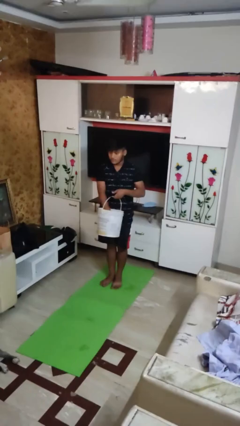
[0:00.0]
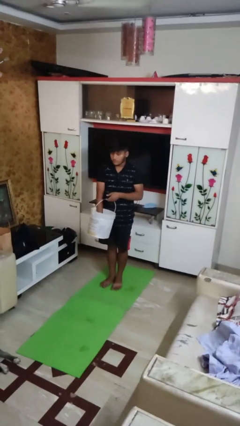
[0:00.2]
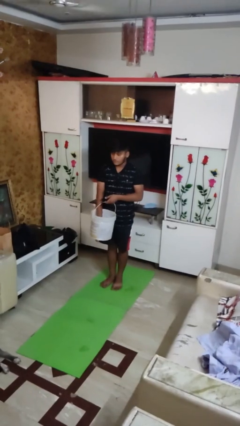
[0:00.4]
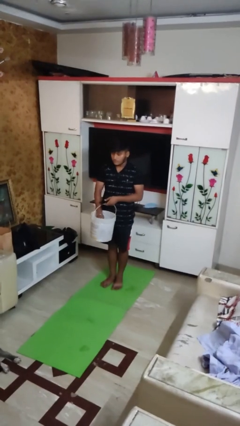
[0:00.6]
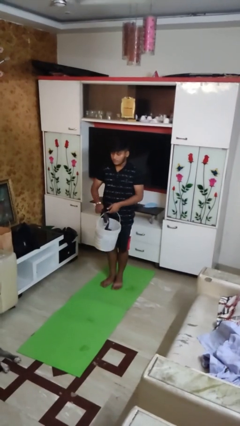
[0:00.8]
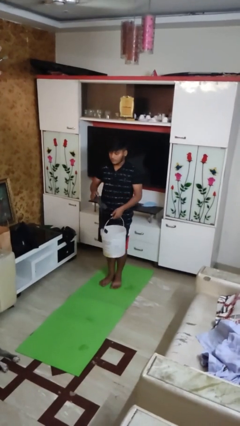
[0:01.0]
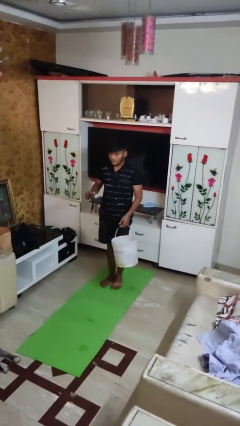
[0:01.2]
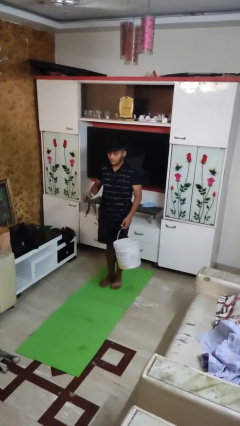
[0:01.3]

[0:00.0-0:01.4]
person takes object from basket

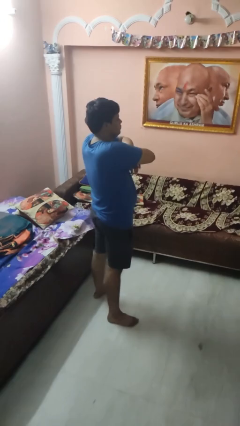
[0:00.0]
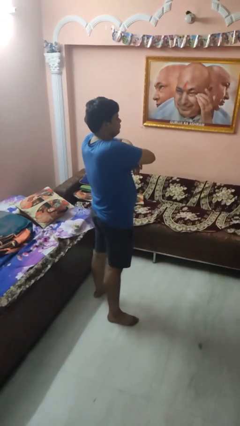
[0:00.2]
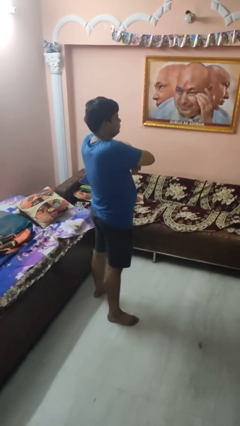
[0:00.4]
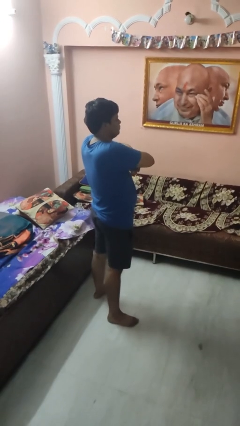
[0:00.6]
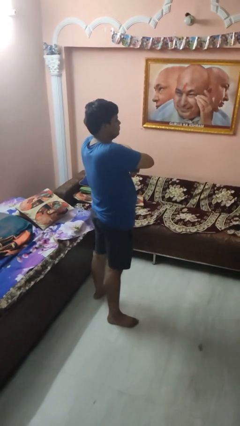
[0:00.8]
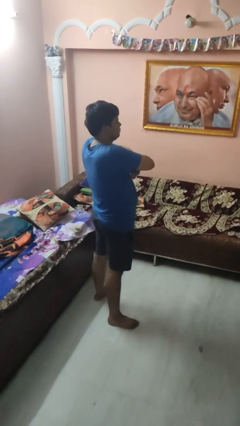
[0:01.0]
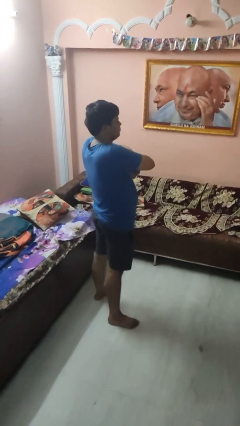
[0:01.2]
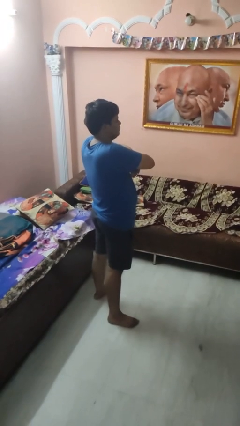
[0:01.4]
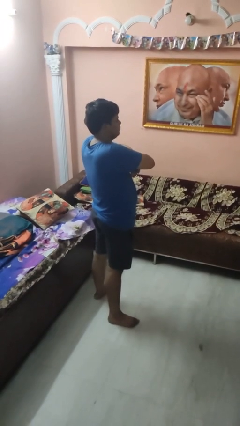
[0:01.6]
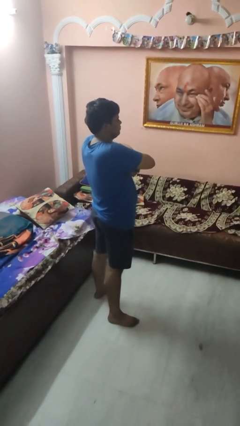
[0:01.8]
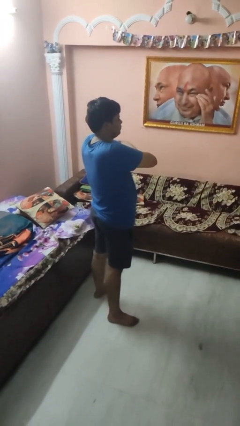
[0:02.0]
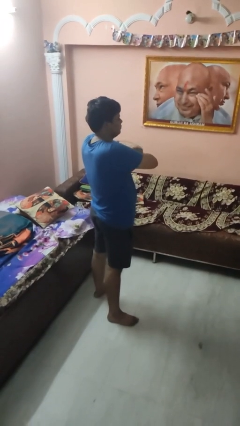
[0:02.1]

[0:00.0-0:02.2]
person crosses arms

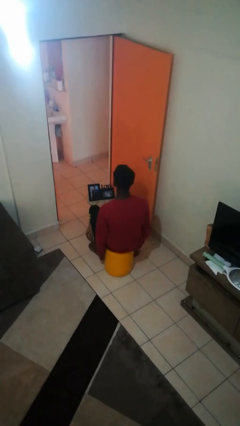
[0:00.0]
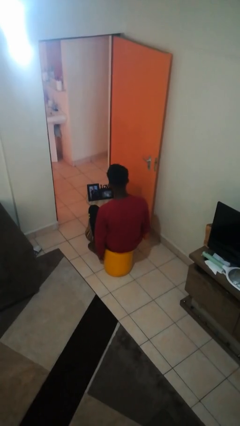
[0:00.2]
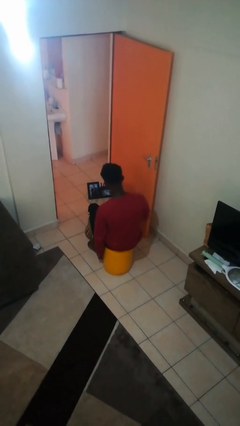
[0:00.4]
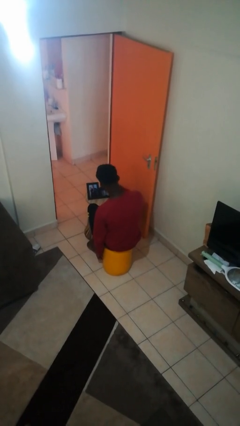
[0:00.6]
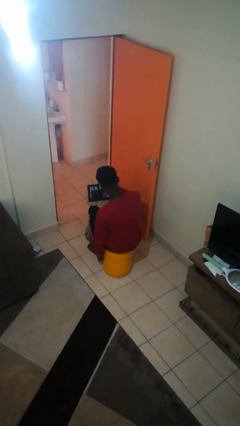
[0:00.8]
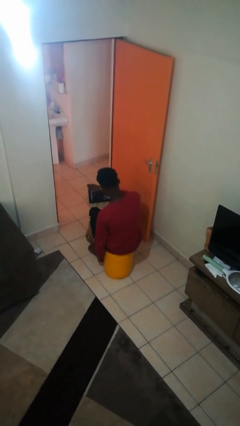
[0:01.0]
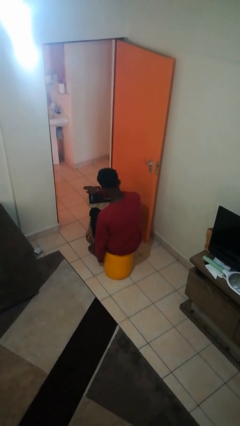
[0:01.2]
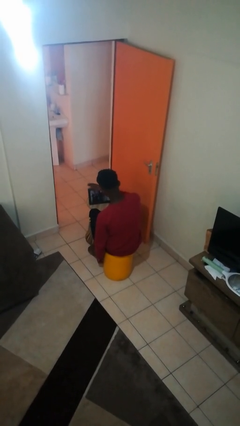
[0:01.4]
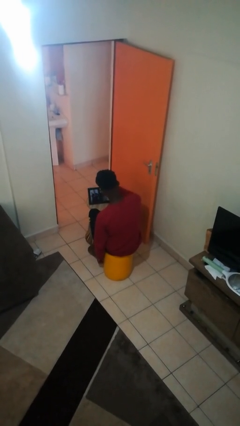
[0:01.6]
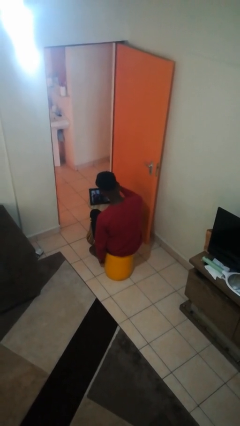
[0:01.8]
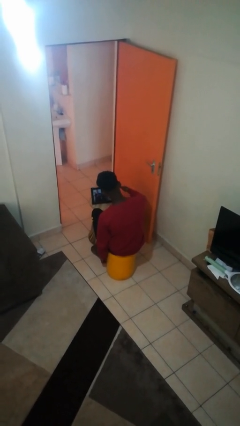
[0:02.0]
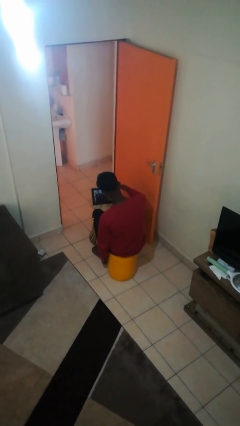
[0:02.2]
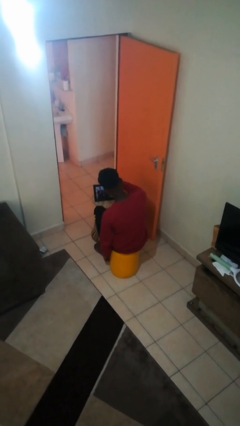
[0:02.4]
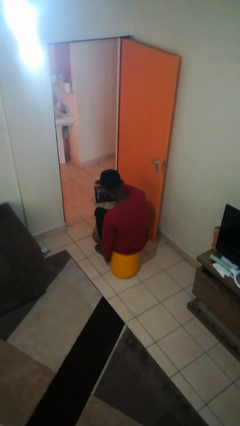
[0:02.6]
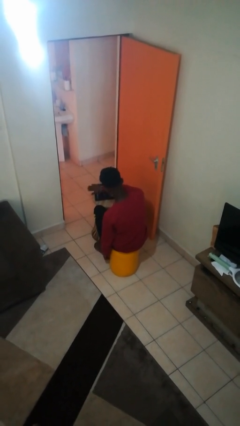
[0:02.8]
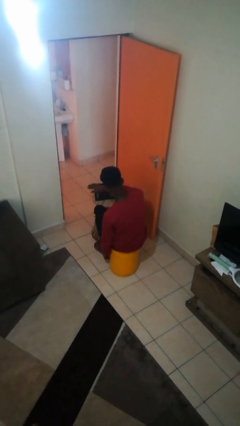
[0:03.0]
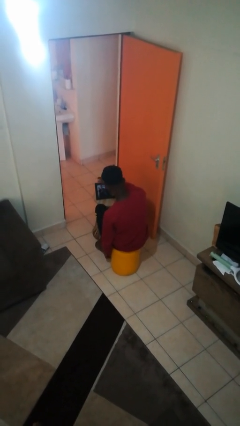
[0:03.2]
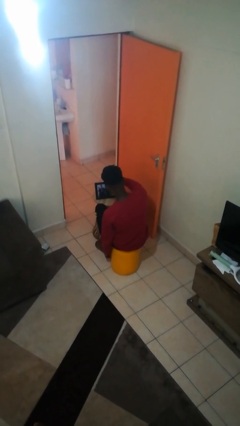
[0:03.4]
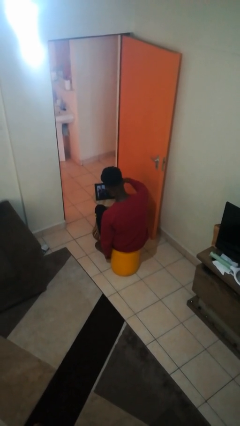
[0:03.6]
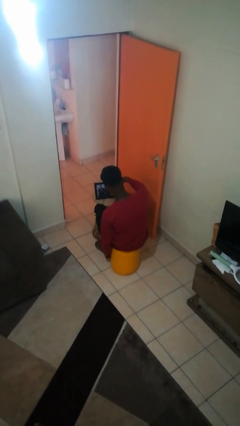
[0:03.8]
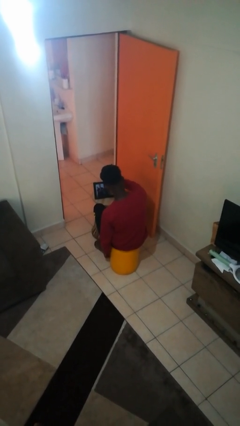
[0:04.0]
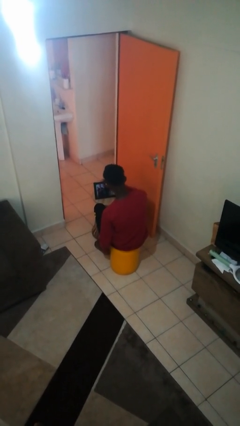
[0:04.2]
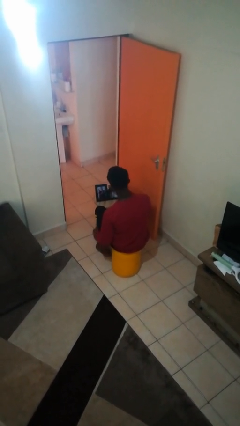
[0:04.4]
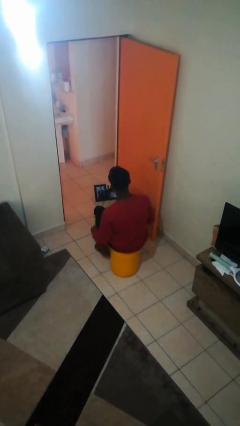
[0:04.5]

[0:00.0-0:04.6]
person waves hand over object

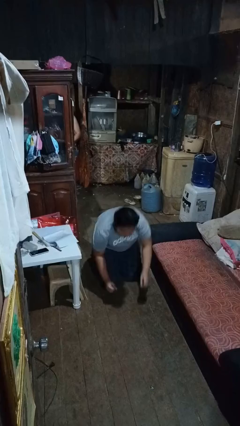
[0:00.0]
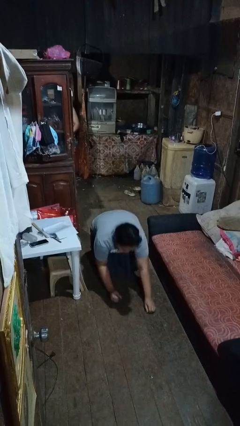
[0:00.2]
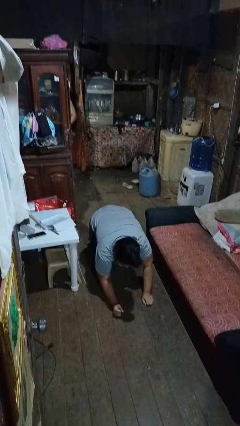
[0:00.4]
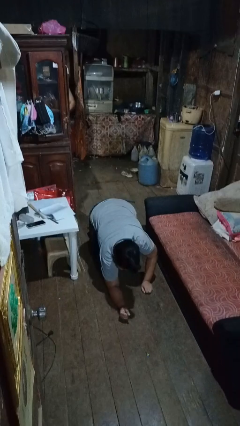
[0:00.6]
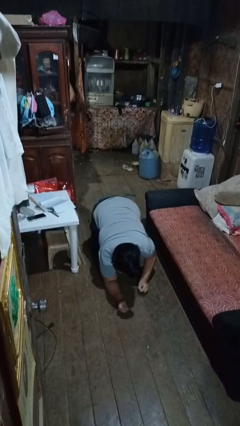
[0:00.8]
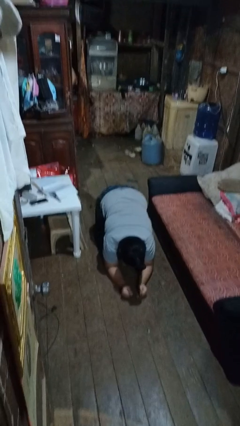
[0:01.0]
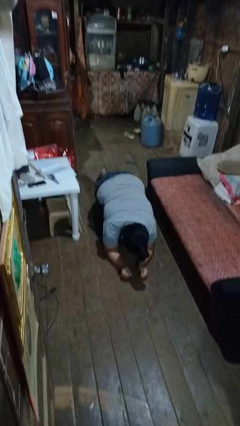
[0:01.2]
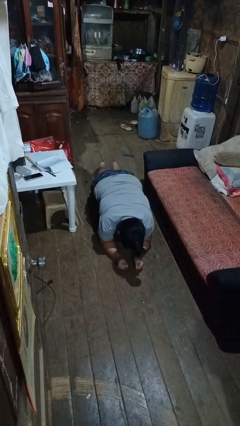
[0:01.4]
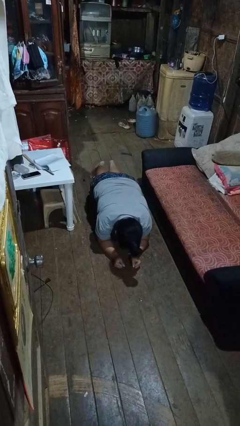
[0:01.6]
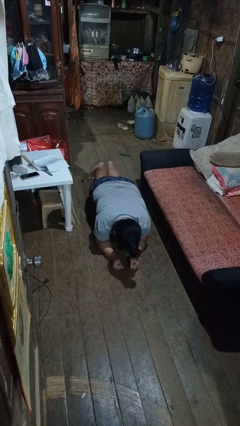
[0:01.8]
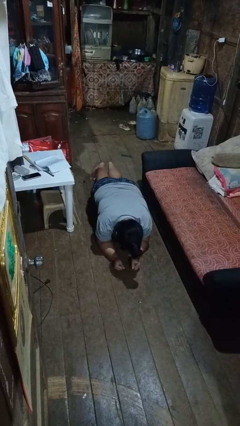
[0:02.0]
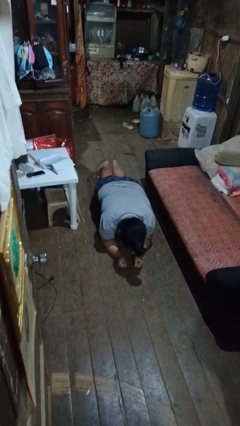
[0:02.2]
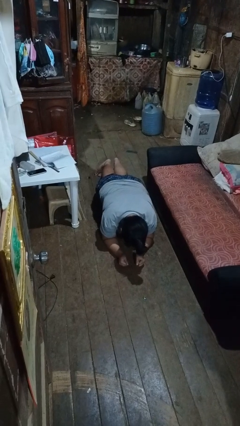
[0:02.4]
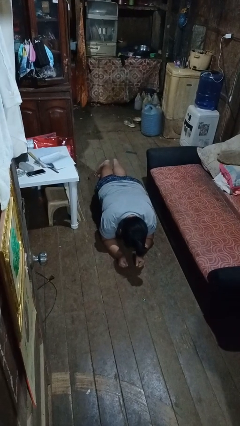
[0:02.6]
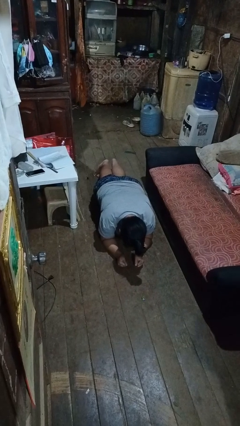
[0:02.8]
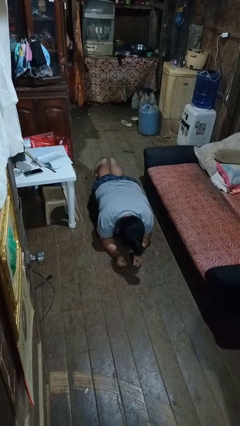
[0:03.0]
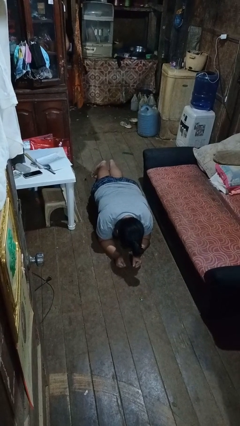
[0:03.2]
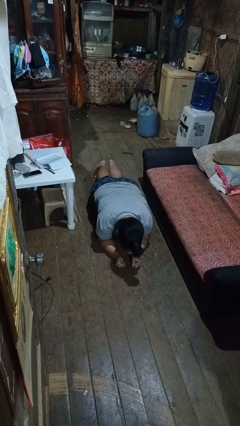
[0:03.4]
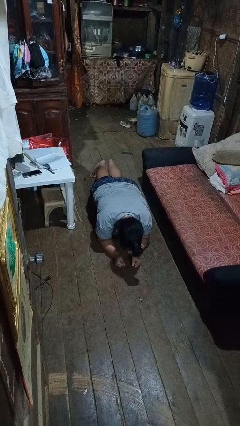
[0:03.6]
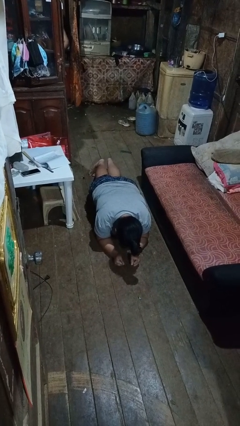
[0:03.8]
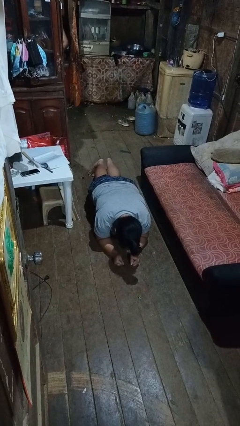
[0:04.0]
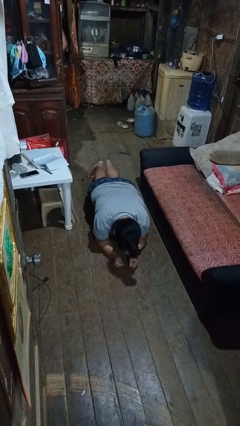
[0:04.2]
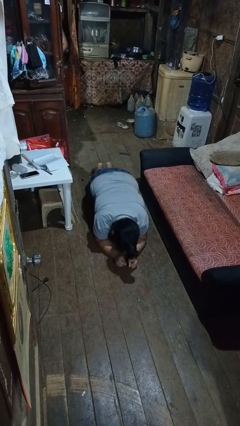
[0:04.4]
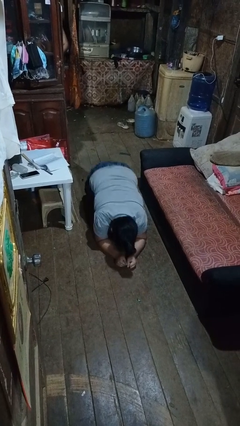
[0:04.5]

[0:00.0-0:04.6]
person exercises with plank

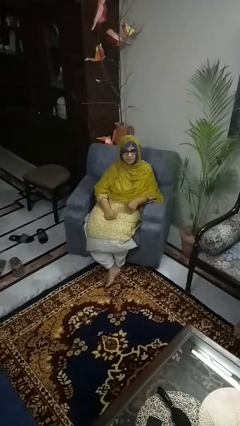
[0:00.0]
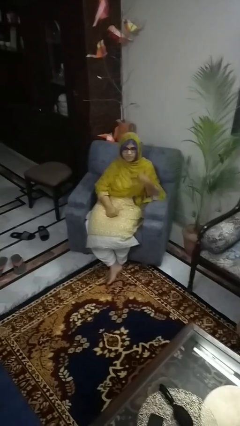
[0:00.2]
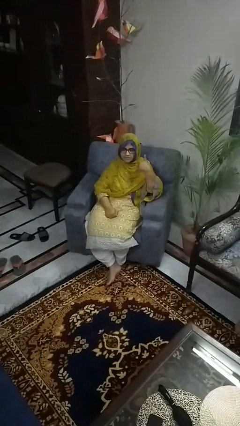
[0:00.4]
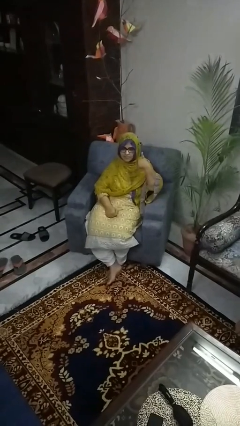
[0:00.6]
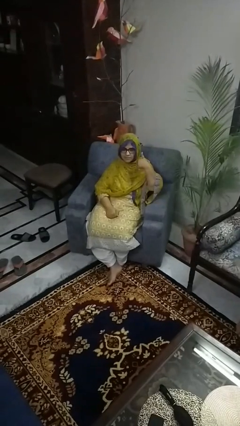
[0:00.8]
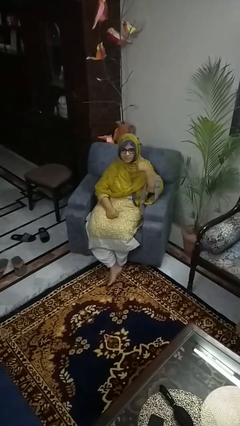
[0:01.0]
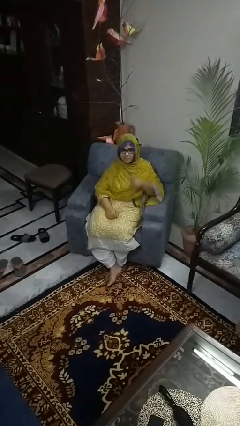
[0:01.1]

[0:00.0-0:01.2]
person gestures call me

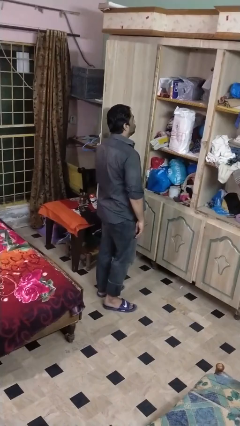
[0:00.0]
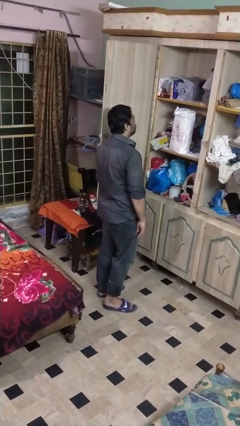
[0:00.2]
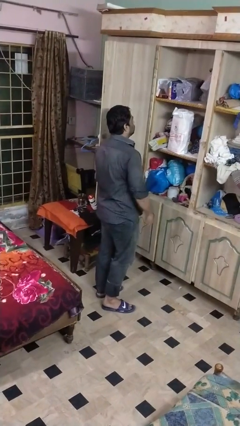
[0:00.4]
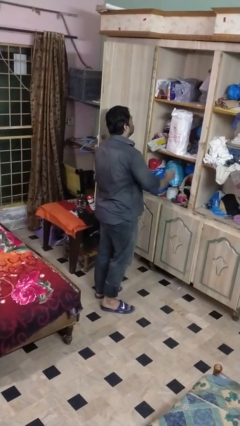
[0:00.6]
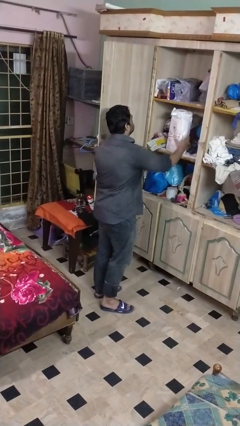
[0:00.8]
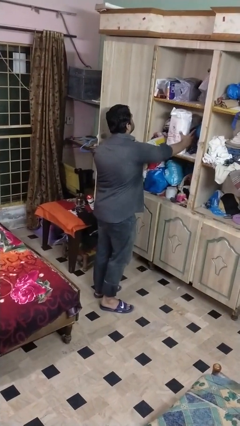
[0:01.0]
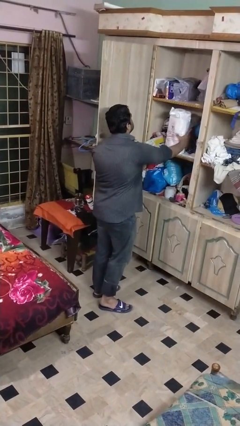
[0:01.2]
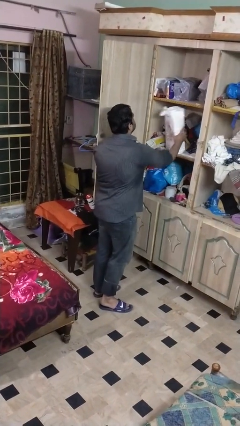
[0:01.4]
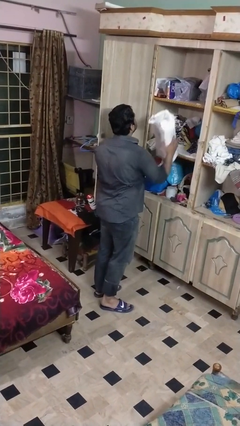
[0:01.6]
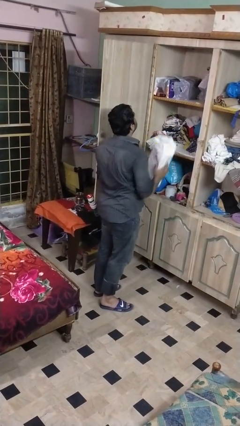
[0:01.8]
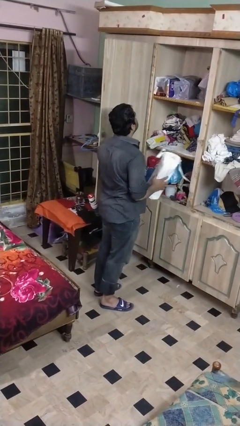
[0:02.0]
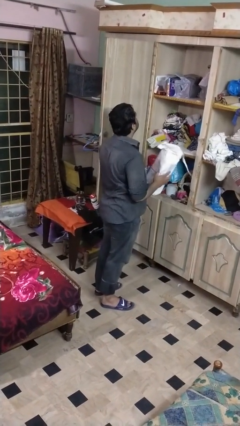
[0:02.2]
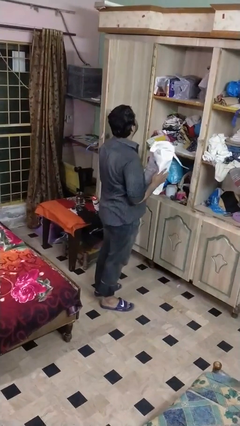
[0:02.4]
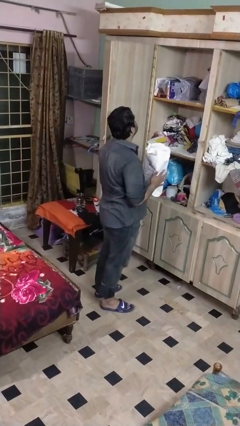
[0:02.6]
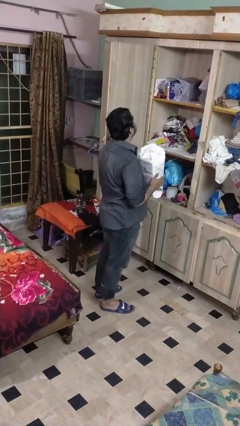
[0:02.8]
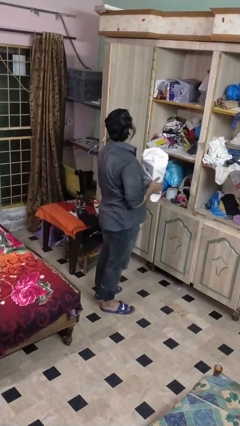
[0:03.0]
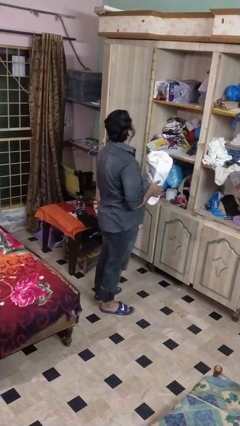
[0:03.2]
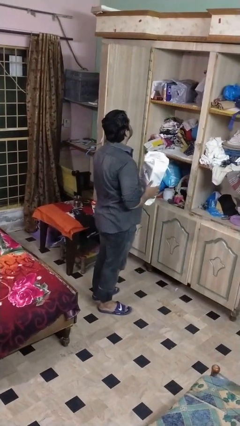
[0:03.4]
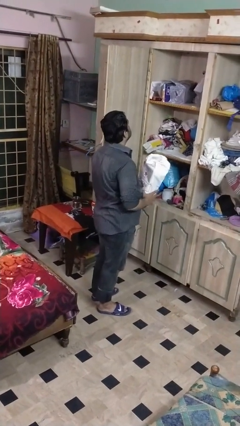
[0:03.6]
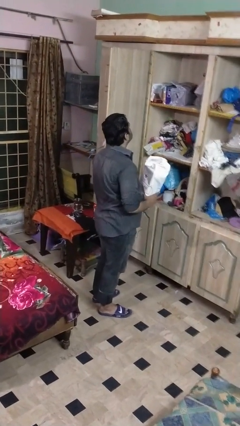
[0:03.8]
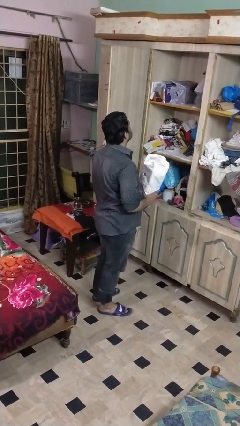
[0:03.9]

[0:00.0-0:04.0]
person picks up object from cabinet
